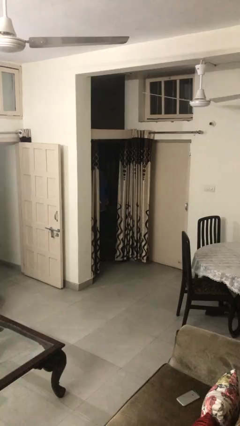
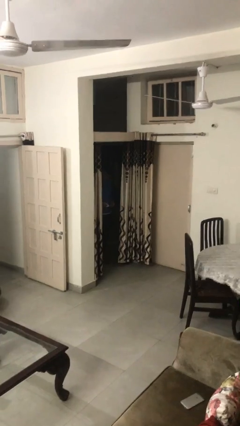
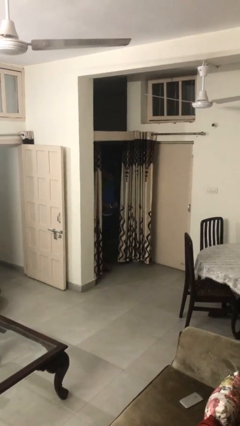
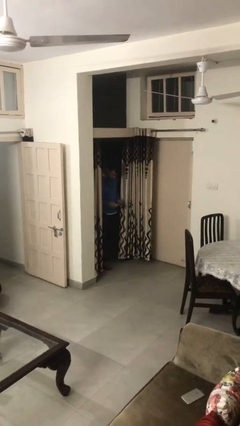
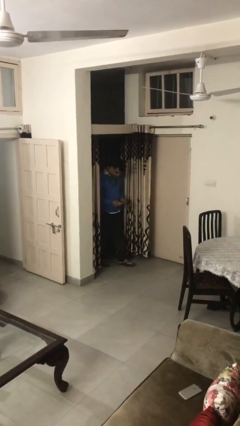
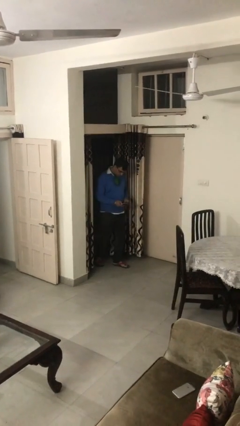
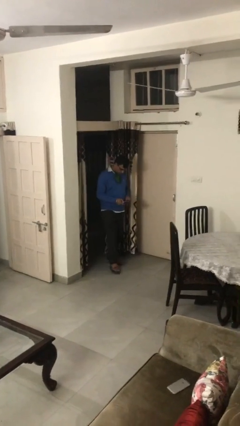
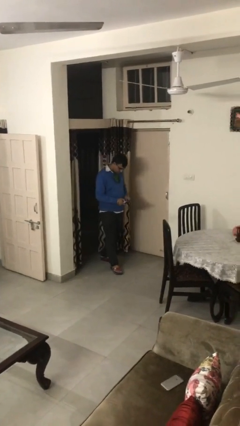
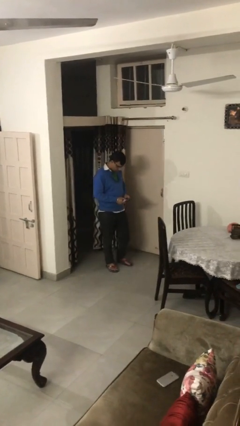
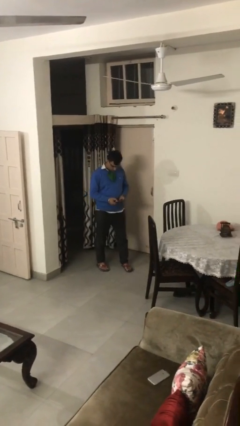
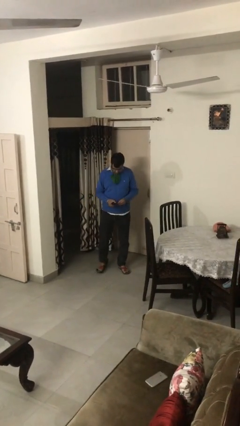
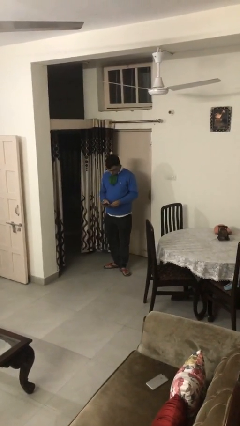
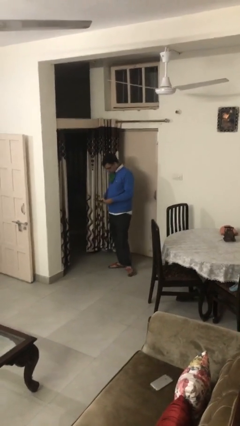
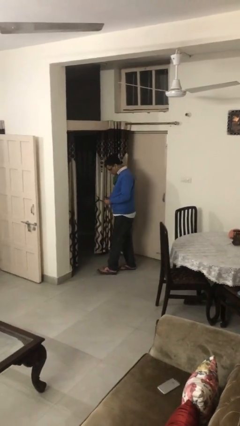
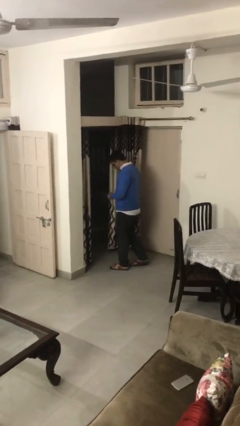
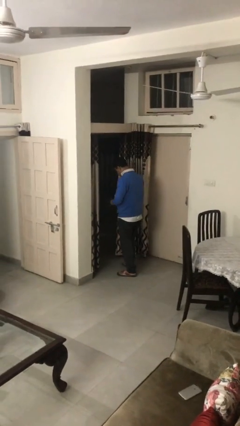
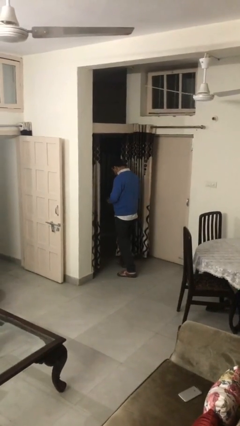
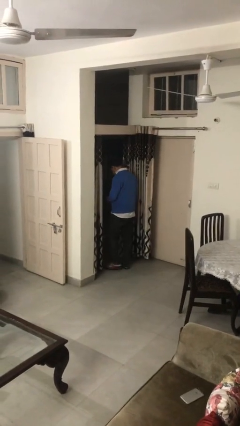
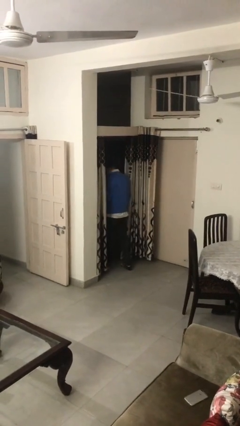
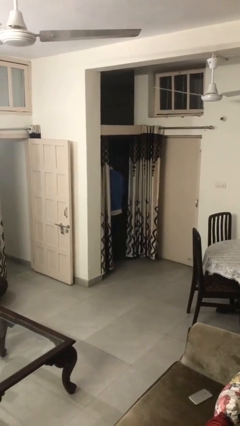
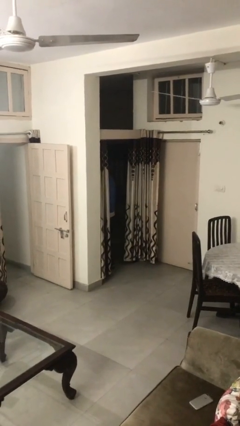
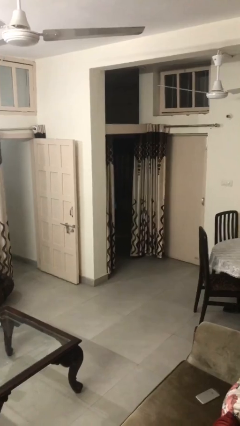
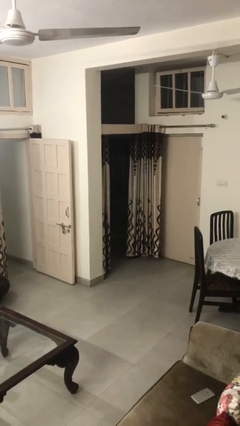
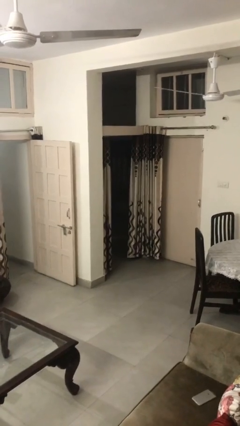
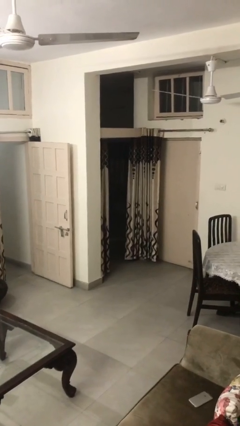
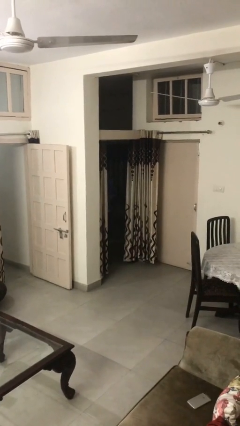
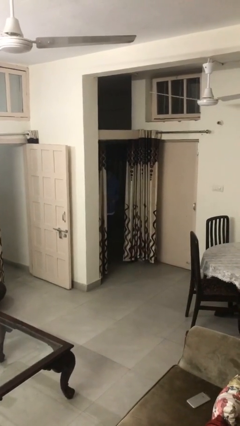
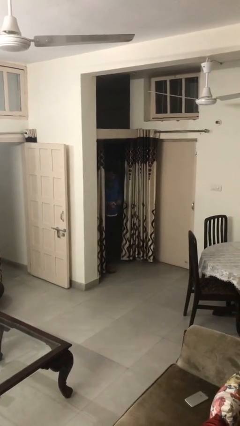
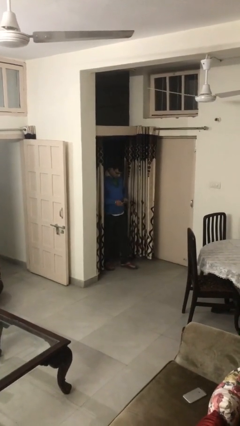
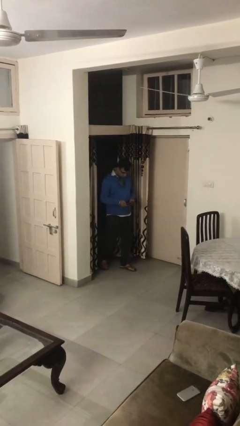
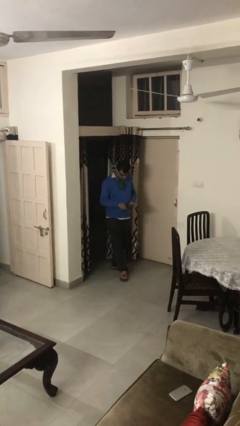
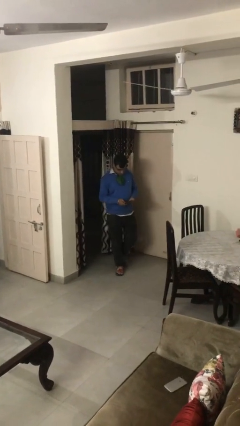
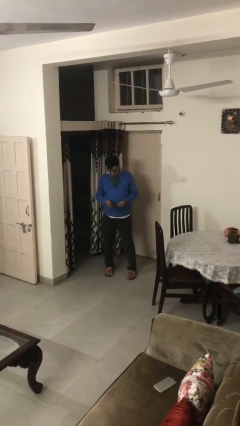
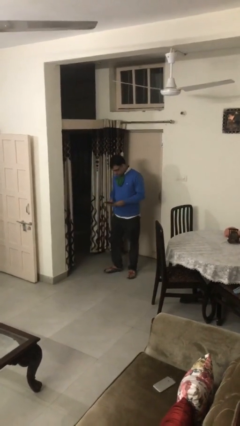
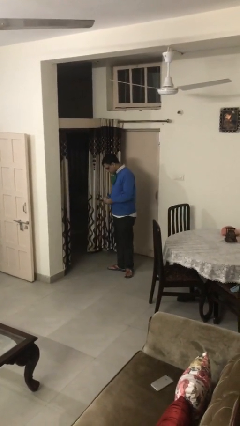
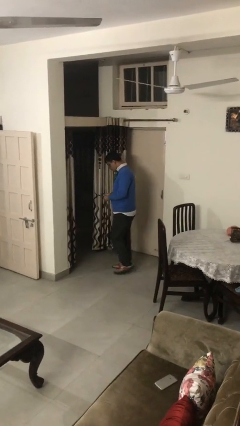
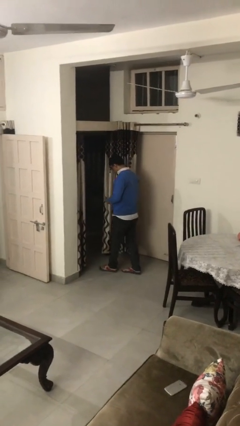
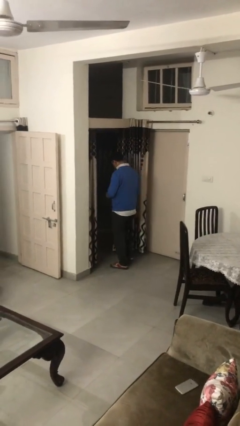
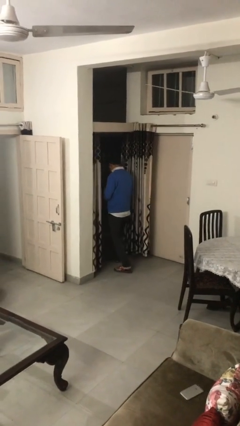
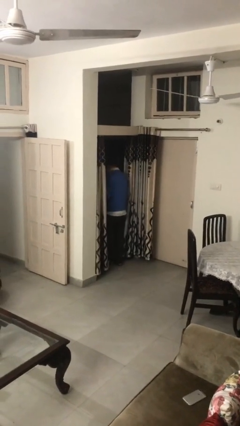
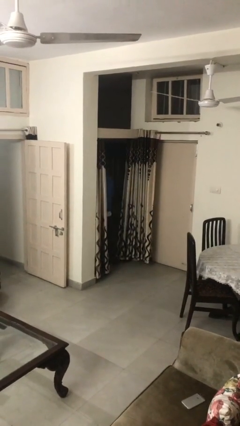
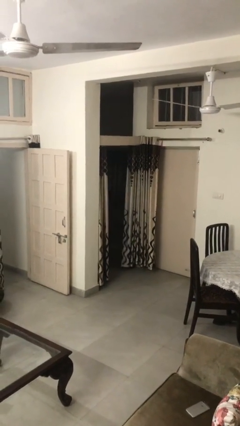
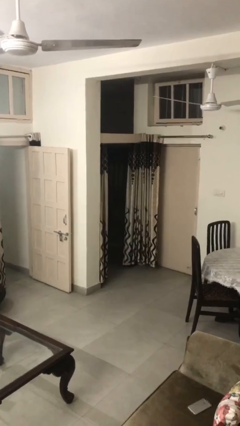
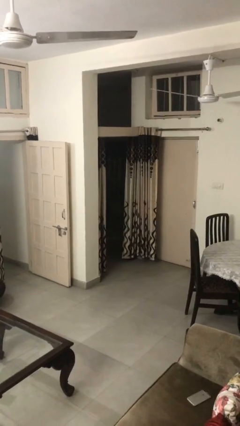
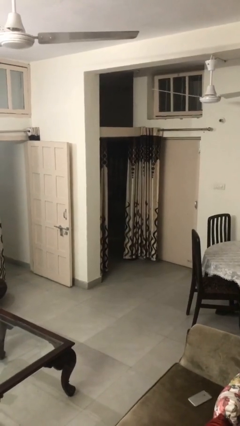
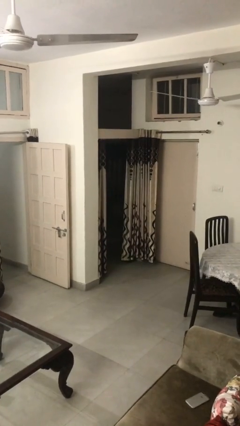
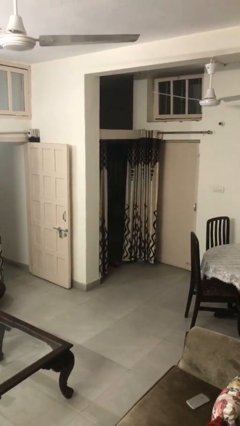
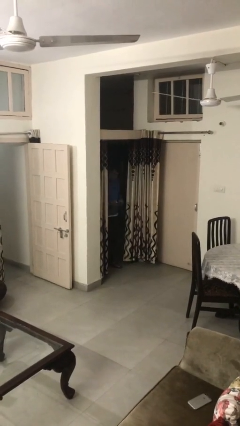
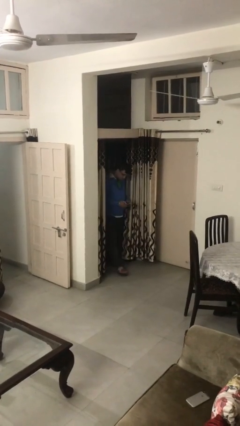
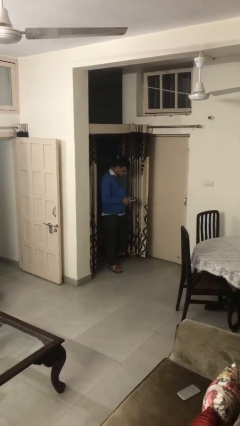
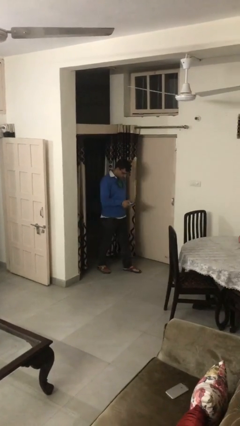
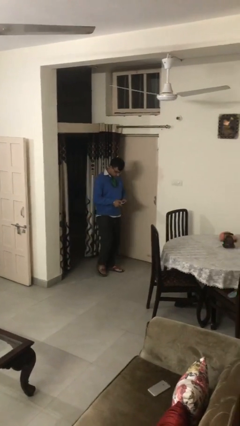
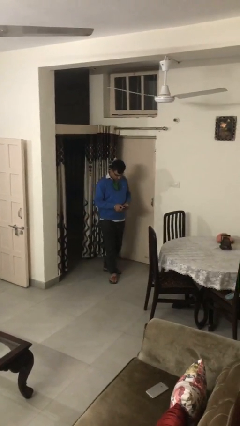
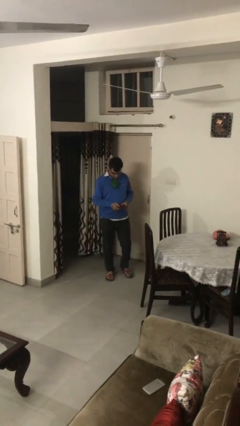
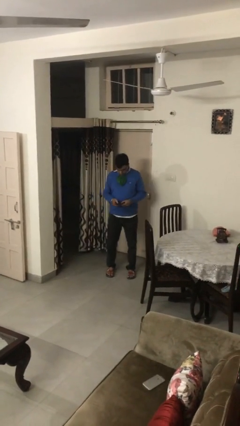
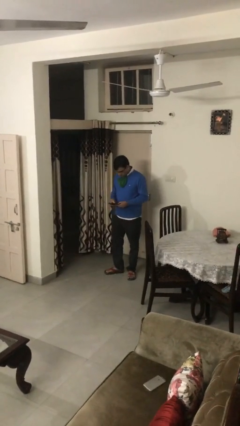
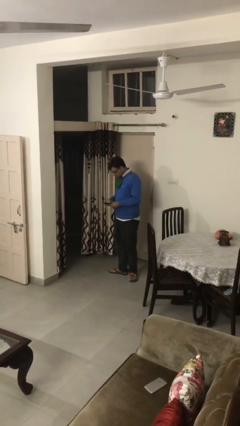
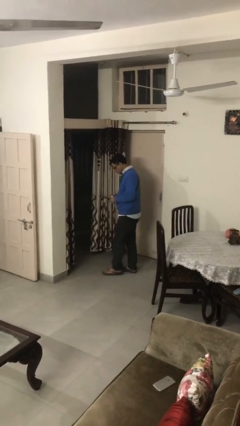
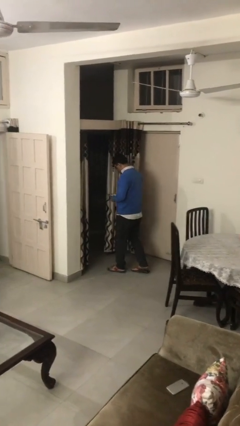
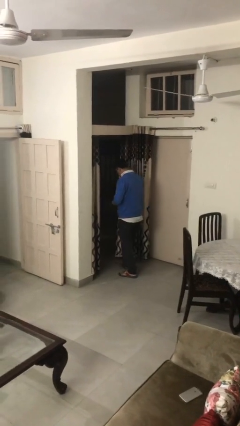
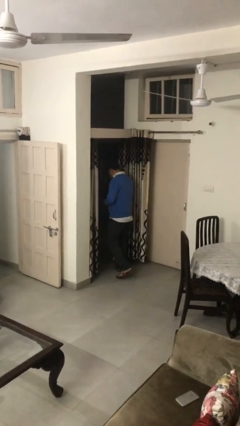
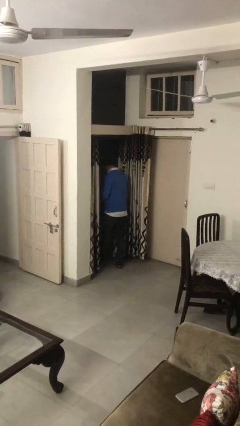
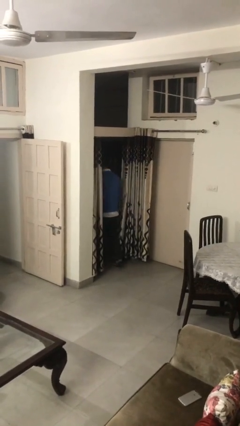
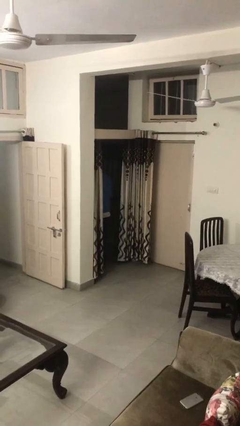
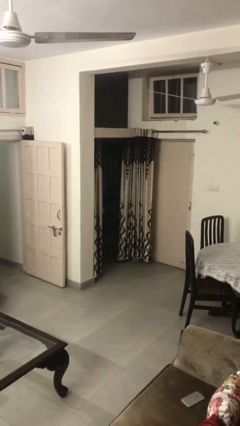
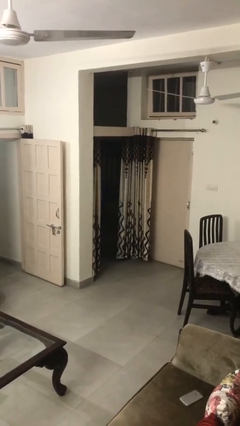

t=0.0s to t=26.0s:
person texts on phone

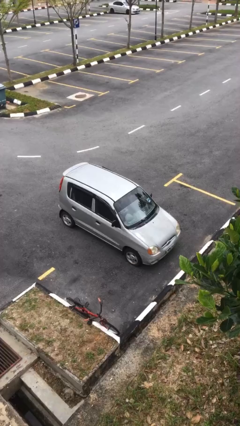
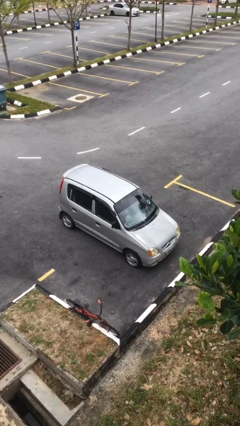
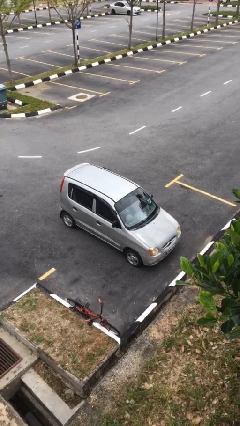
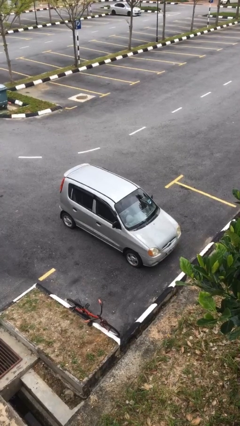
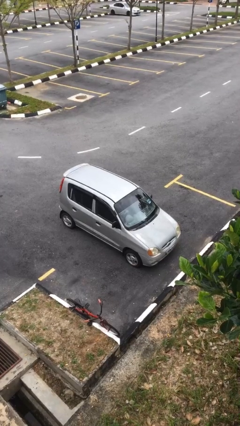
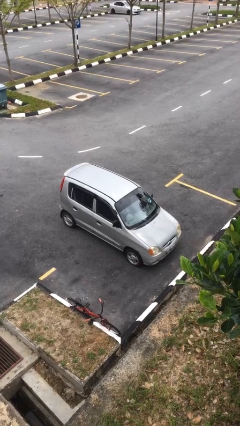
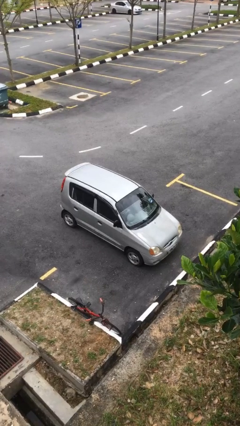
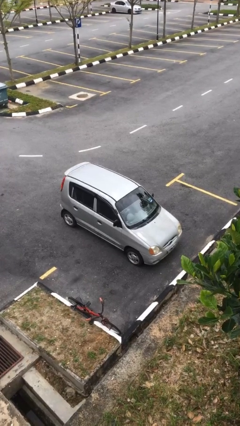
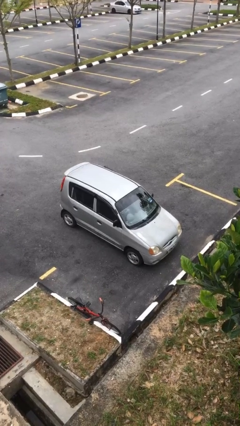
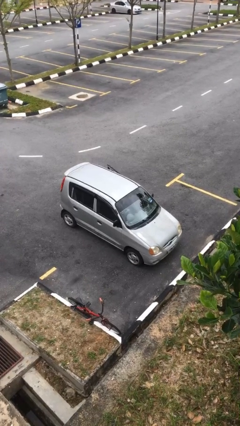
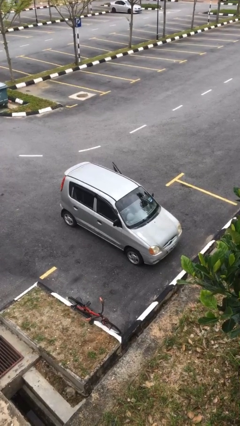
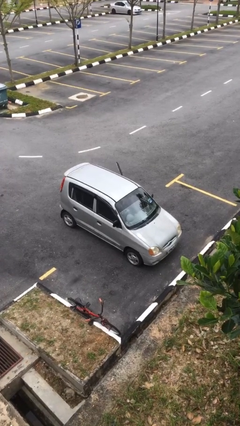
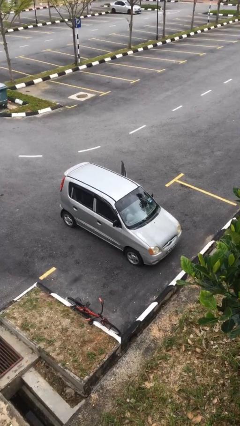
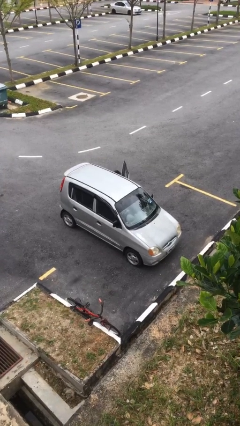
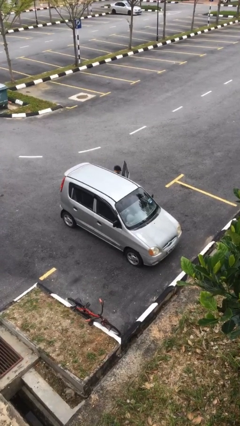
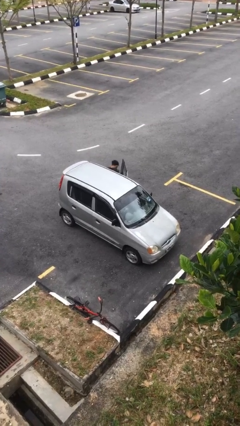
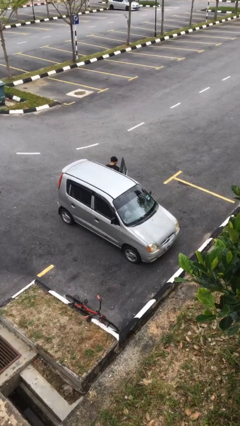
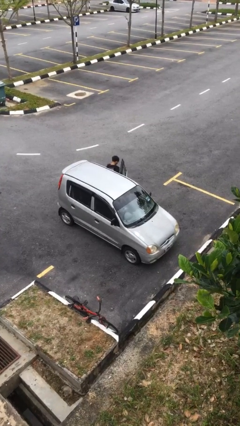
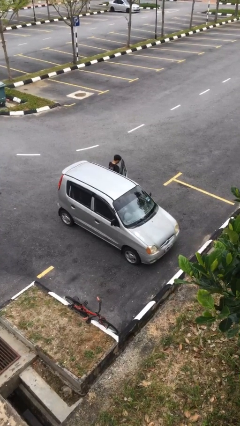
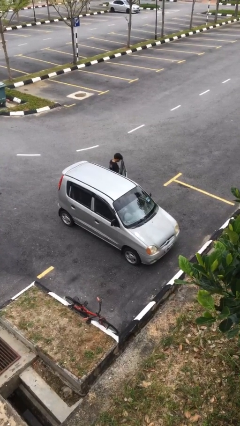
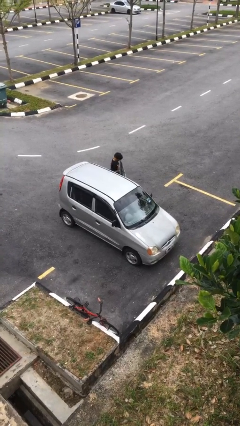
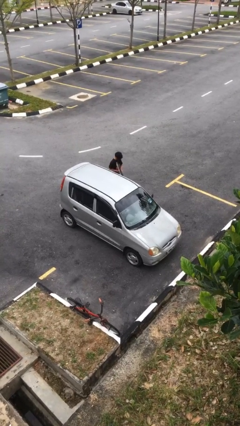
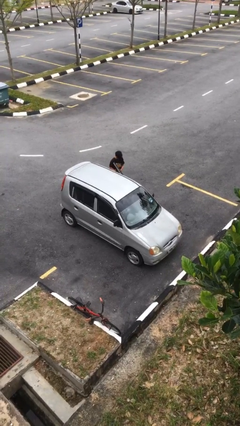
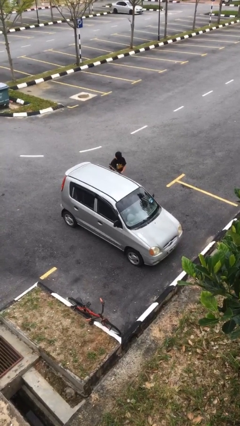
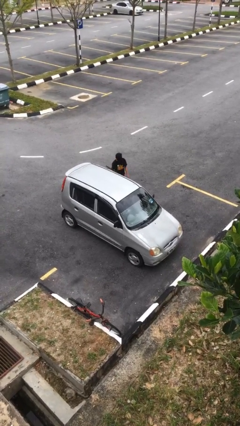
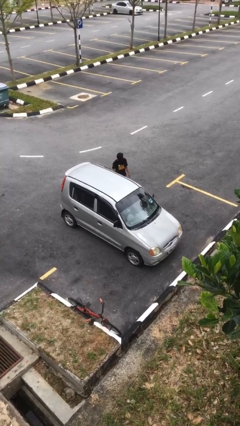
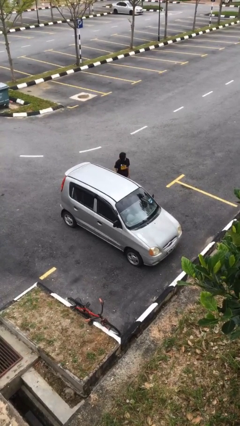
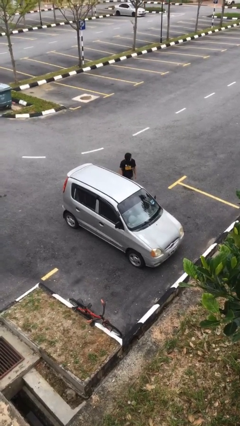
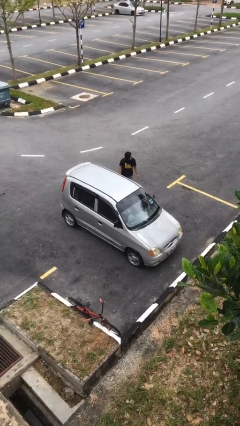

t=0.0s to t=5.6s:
car drops off person
